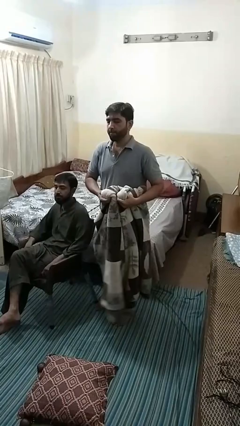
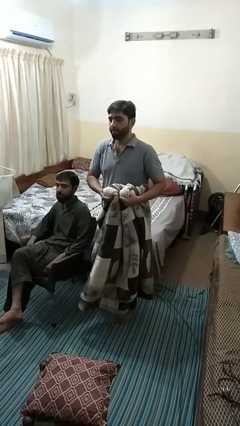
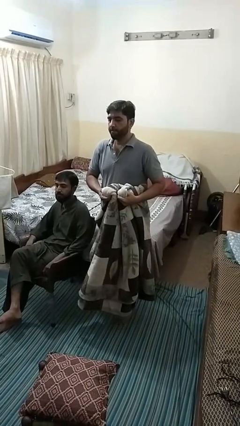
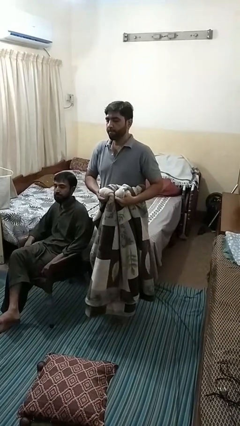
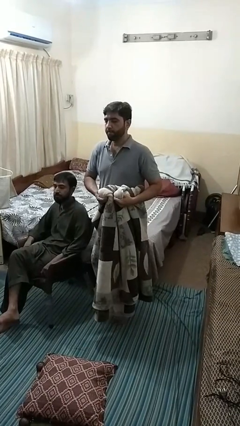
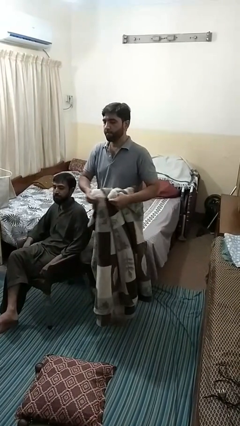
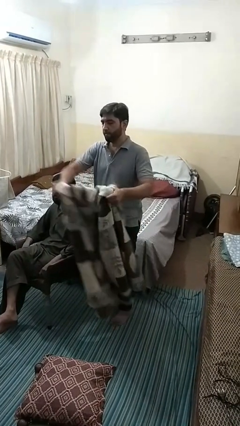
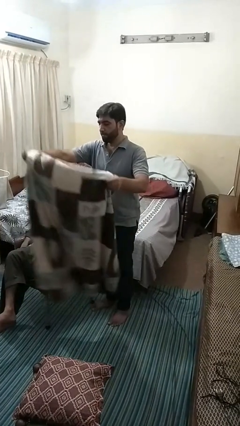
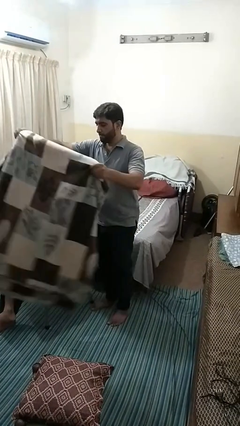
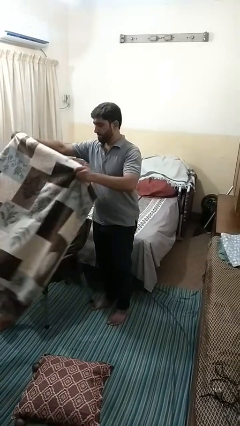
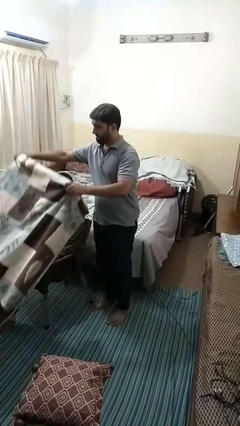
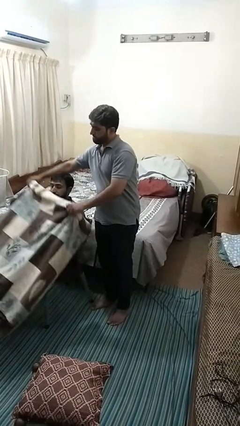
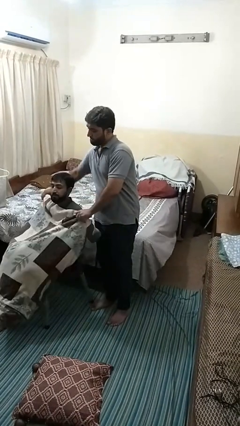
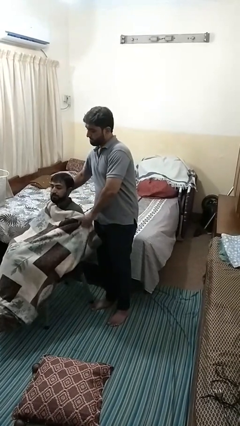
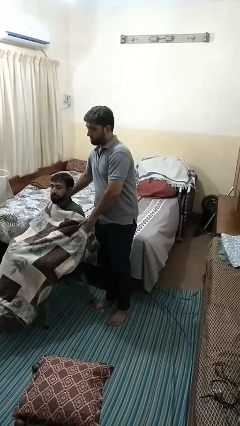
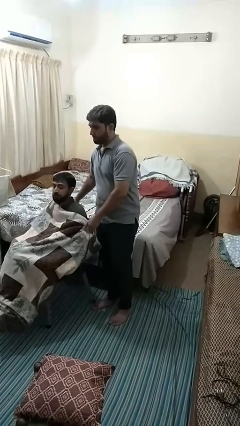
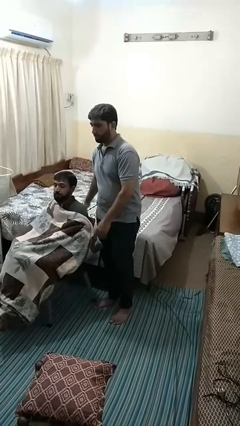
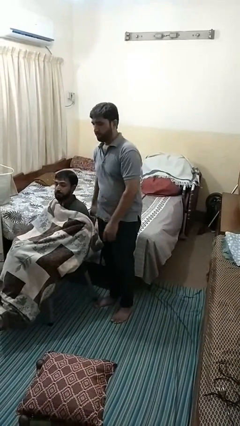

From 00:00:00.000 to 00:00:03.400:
person covers friend with blanket

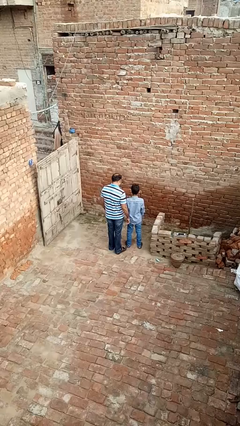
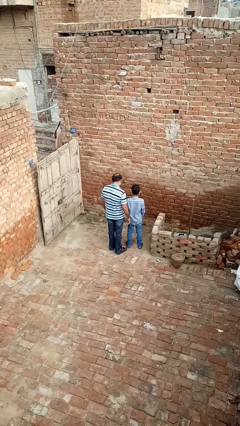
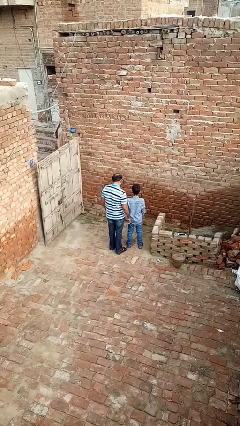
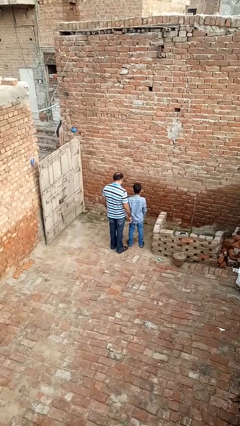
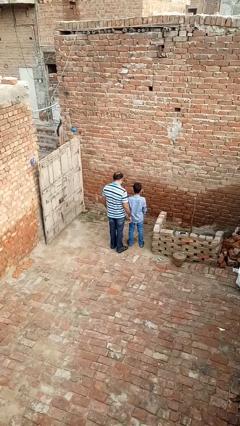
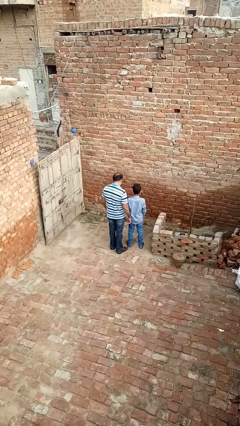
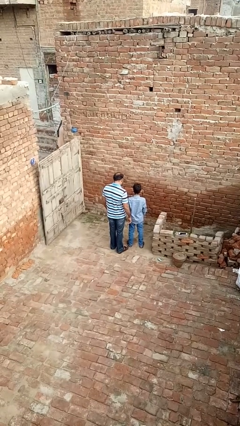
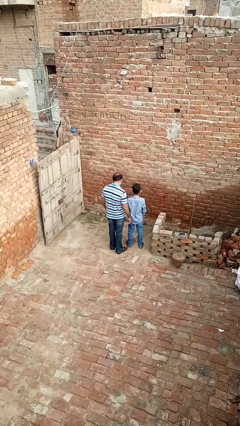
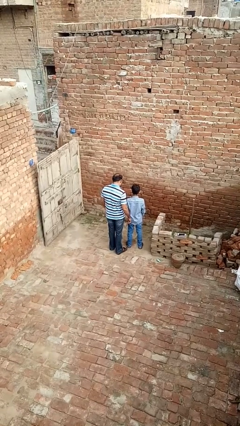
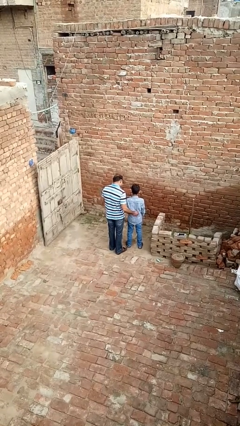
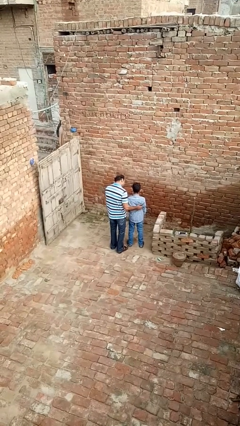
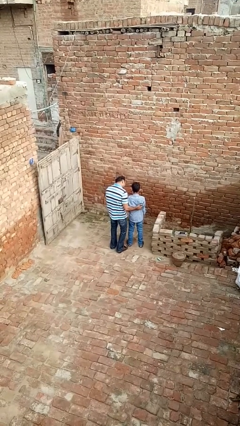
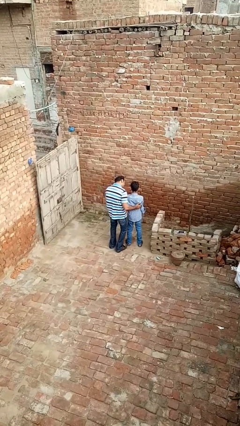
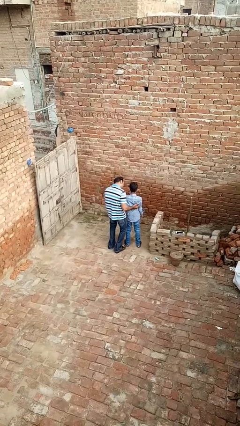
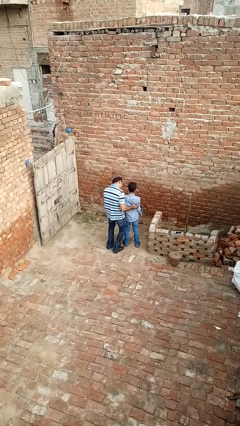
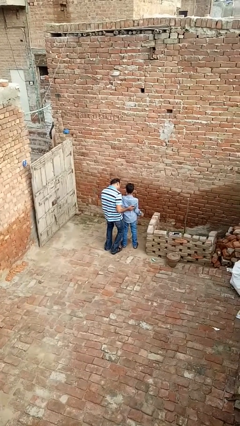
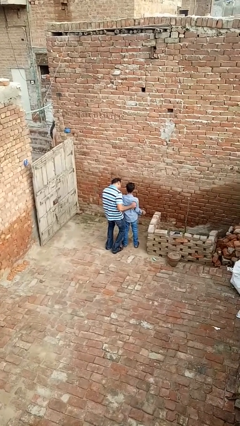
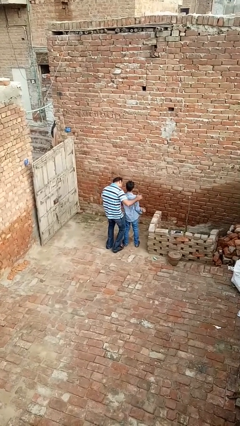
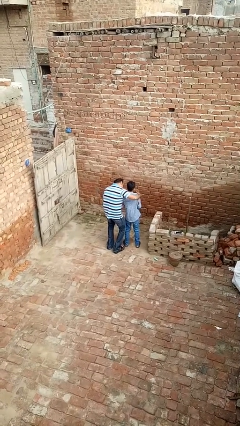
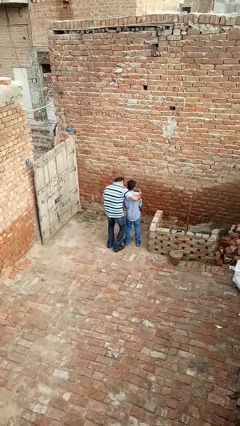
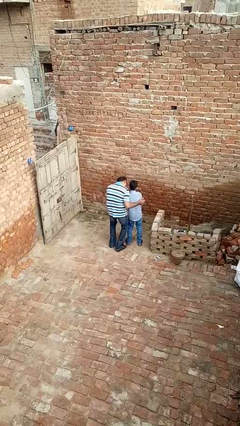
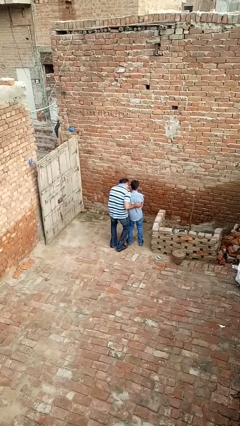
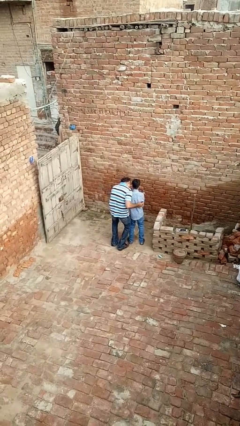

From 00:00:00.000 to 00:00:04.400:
person tickles person

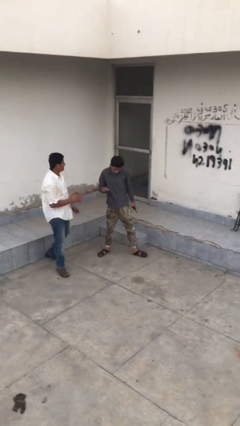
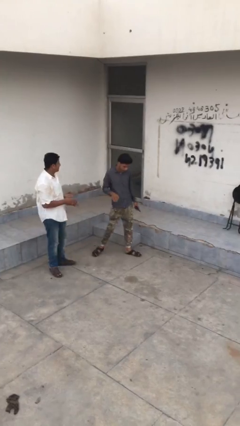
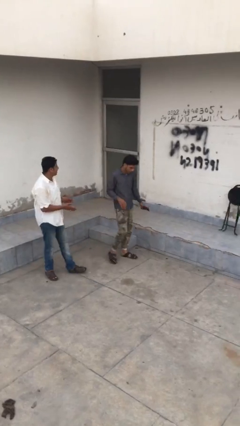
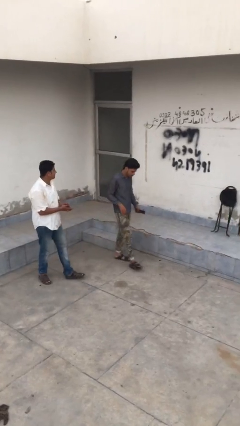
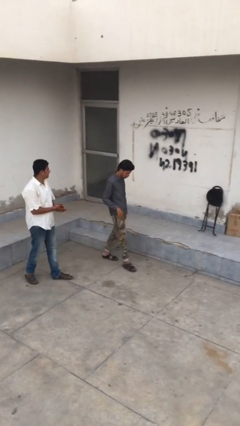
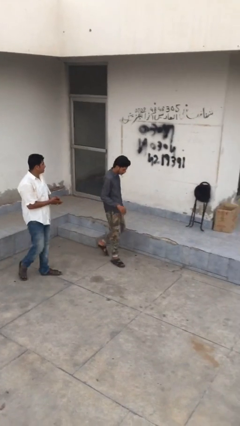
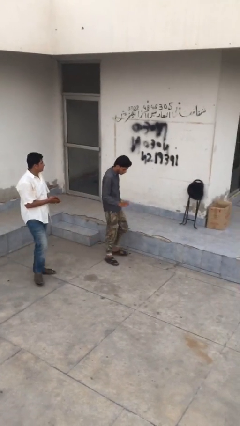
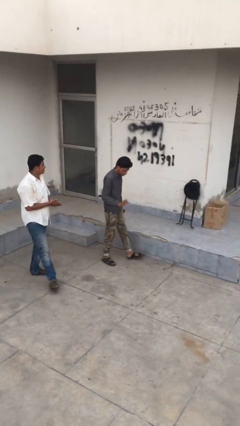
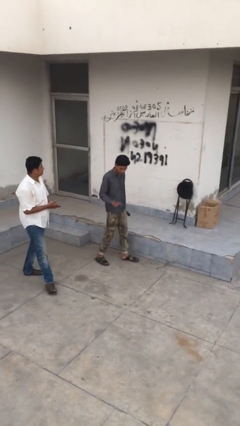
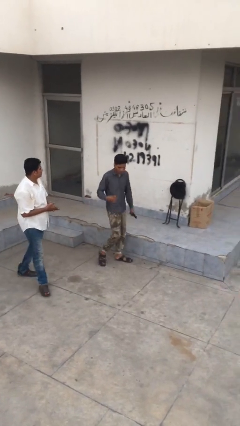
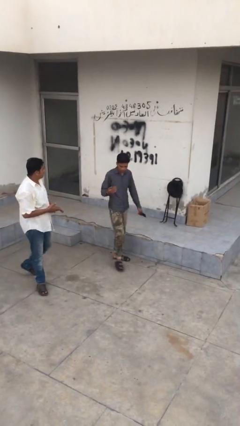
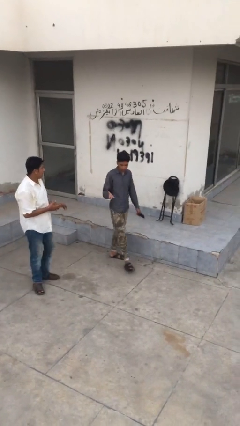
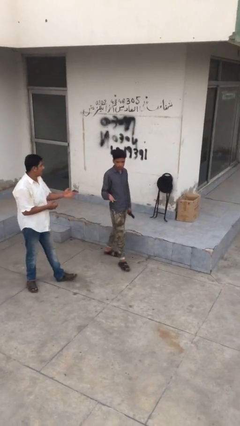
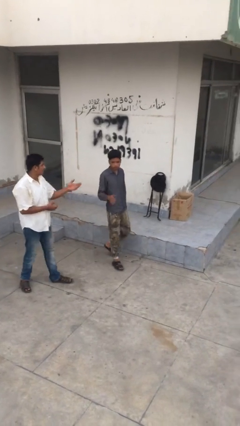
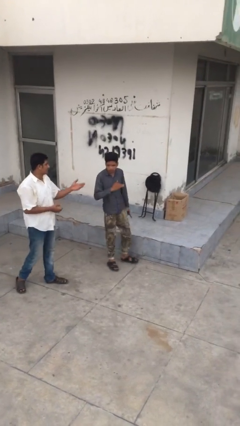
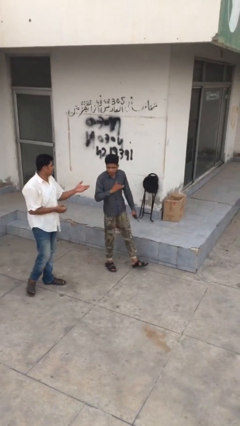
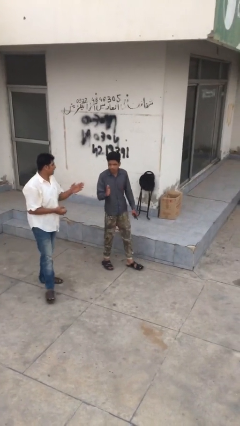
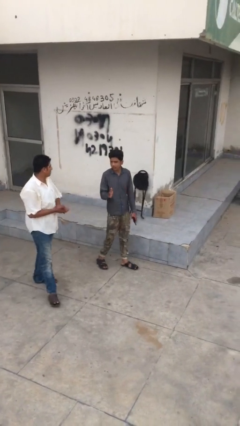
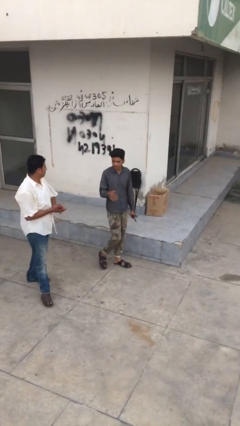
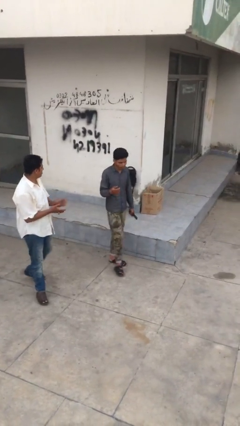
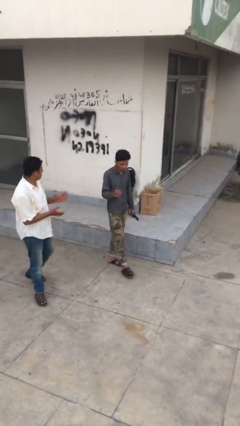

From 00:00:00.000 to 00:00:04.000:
person talks to person

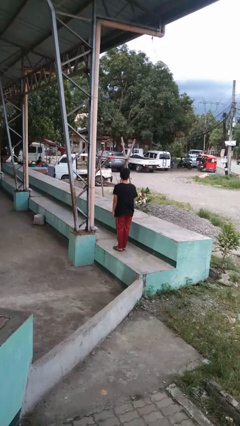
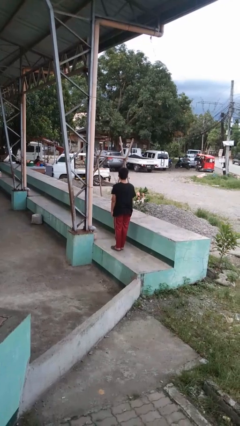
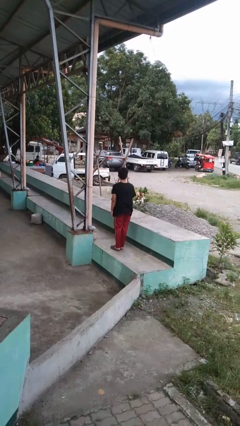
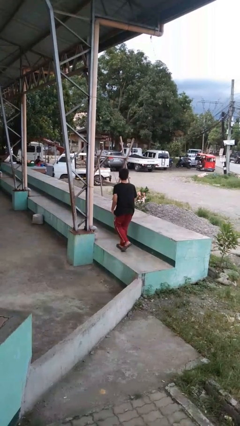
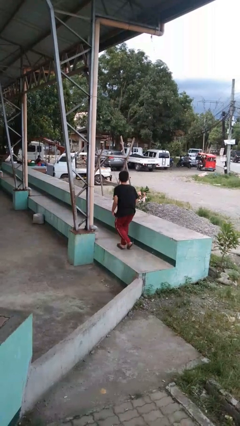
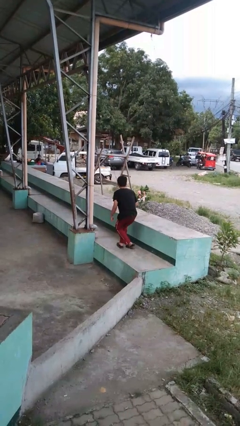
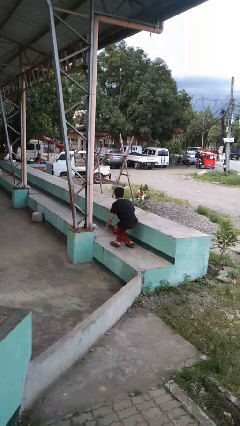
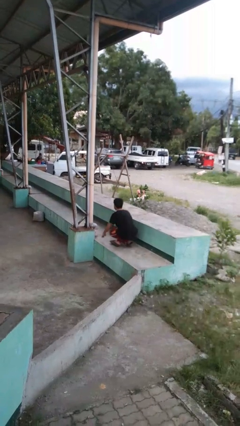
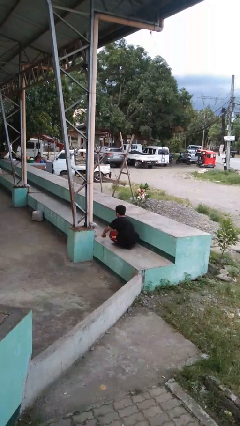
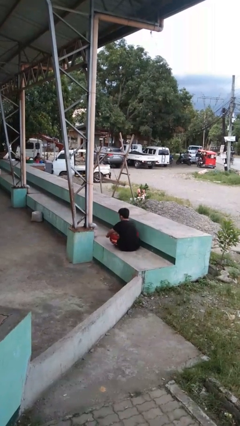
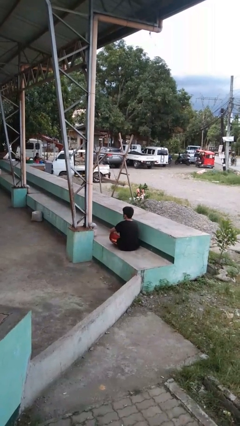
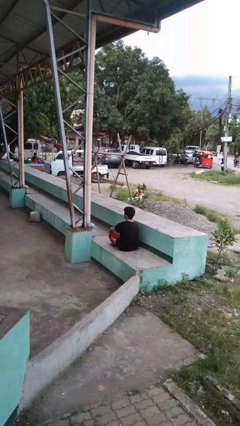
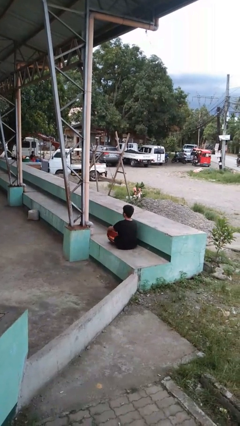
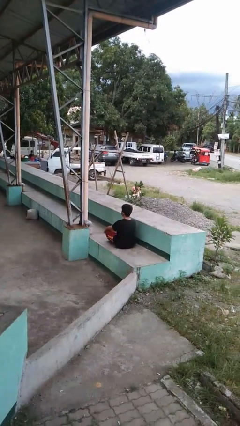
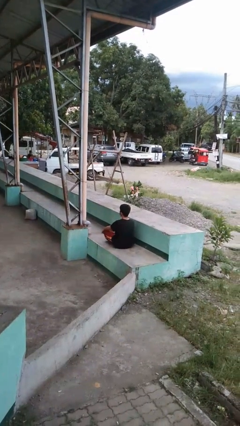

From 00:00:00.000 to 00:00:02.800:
person sits crisscross

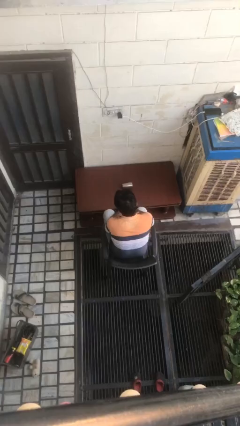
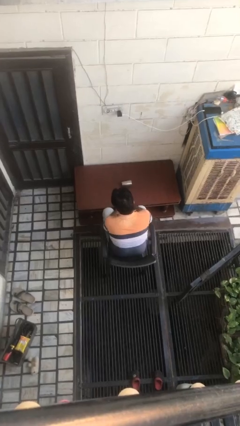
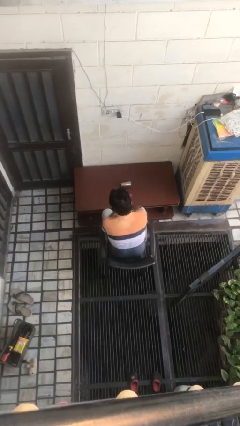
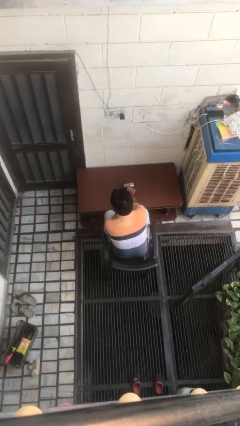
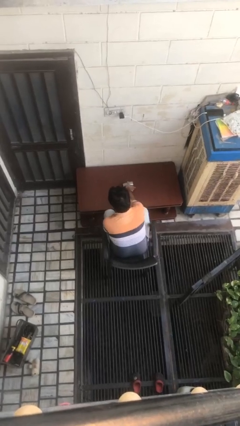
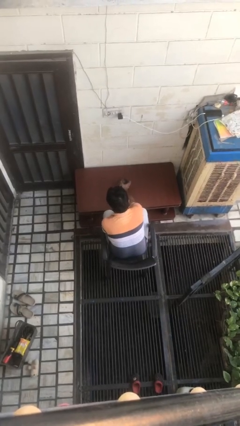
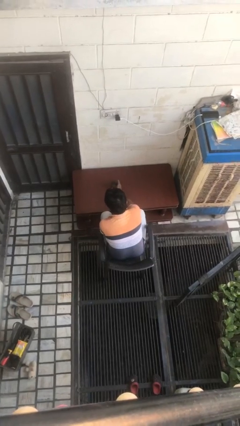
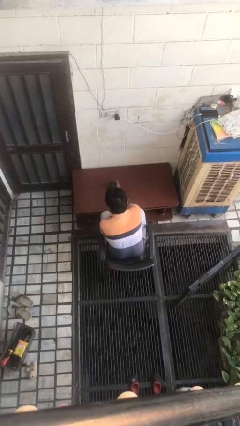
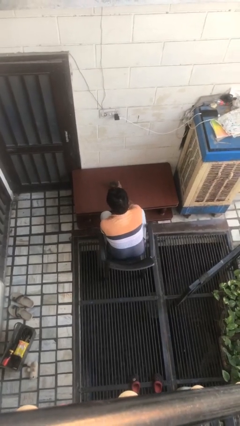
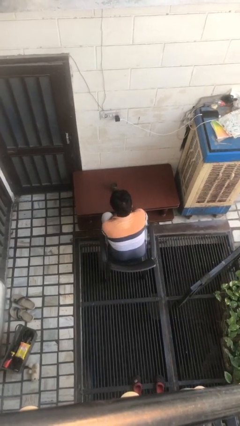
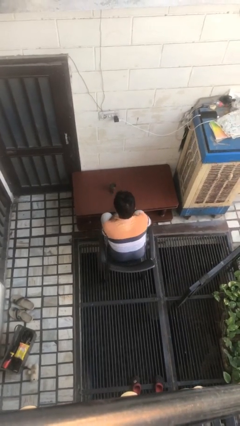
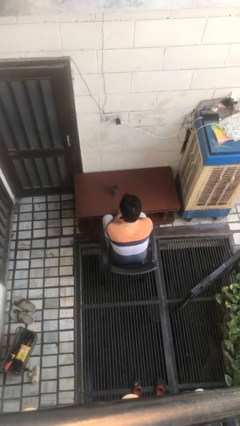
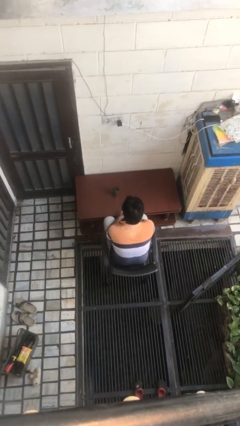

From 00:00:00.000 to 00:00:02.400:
person sets upright glass

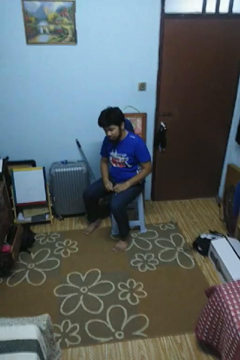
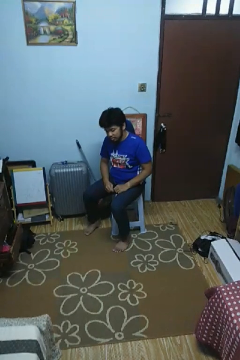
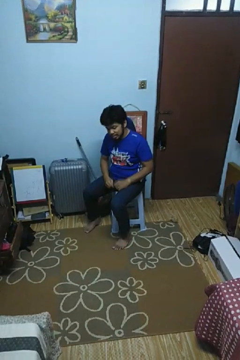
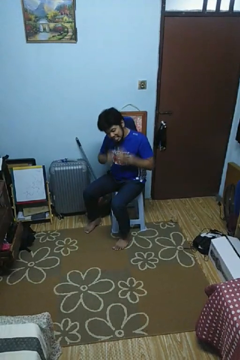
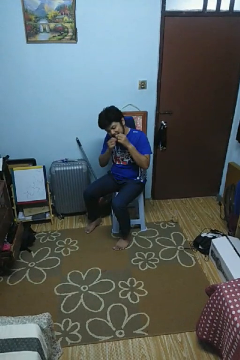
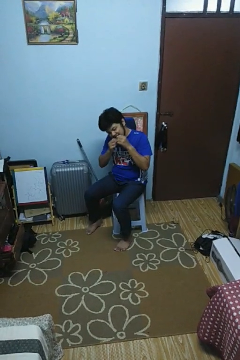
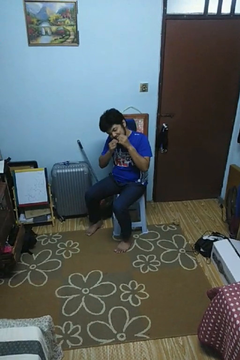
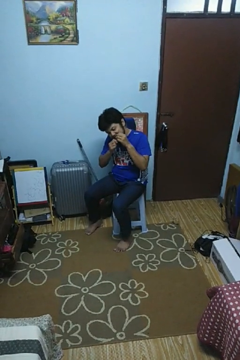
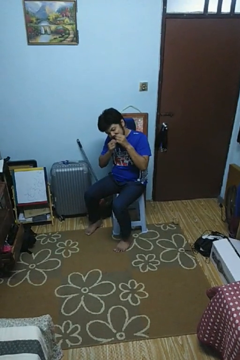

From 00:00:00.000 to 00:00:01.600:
person flosses
